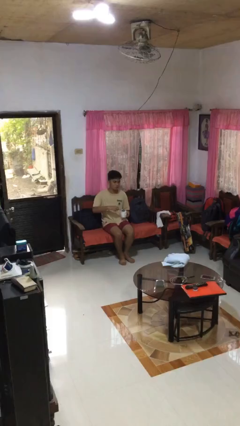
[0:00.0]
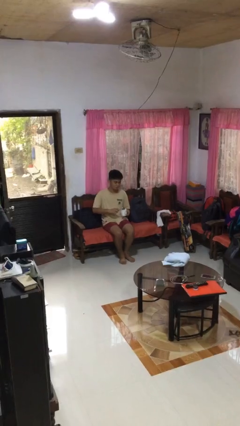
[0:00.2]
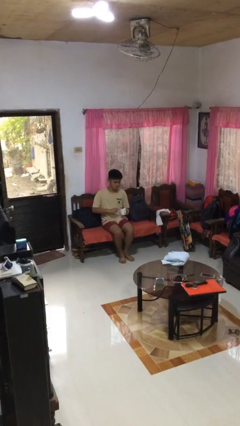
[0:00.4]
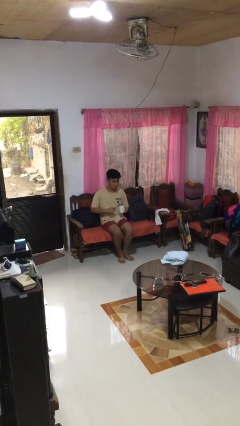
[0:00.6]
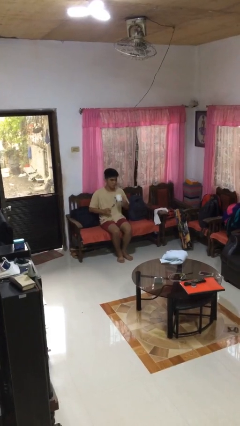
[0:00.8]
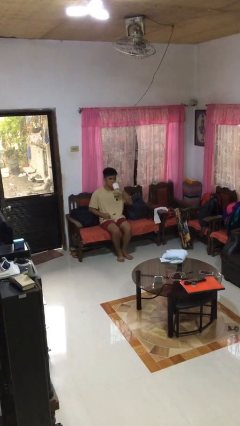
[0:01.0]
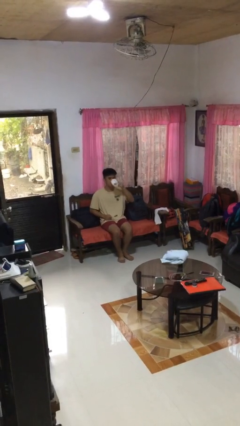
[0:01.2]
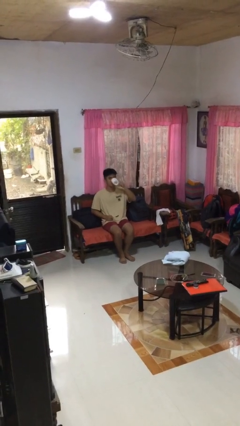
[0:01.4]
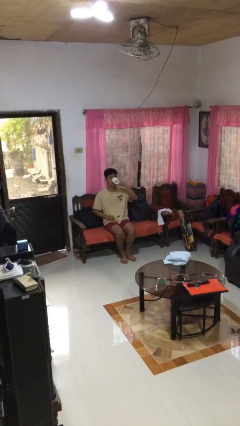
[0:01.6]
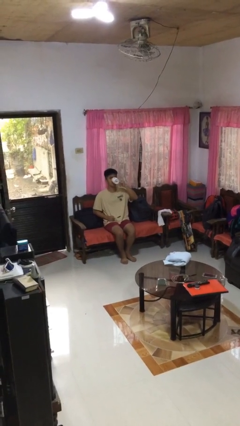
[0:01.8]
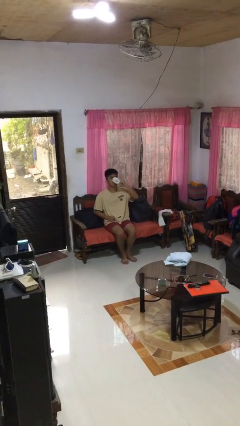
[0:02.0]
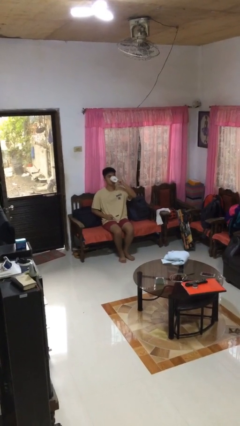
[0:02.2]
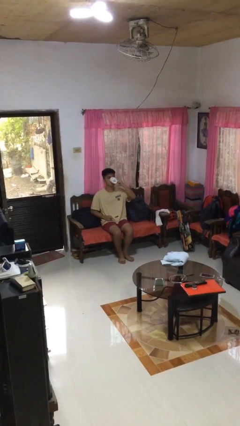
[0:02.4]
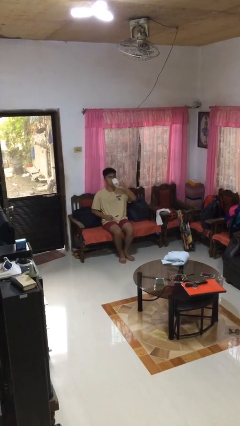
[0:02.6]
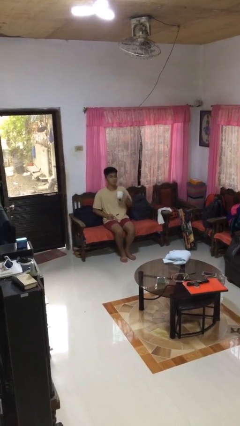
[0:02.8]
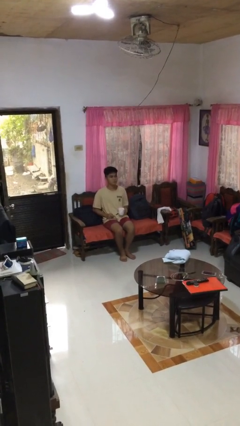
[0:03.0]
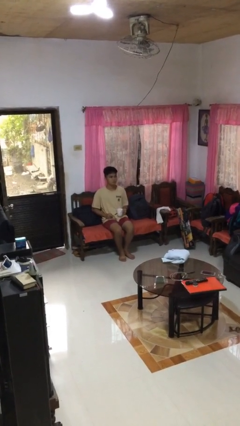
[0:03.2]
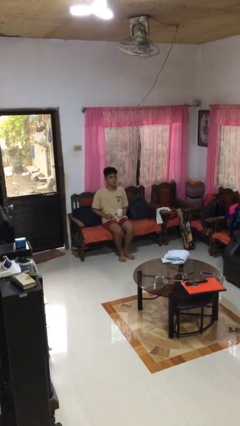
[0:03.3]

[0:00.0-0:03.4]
person drinks from mug

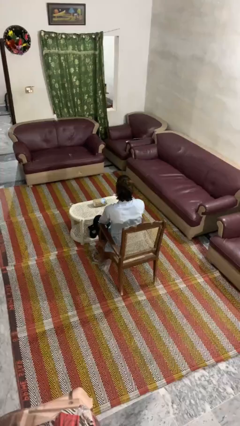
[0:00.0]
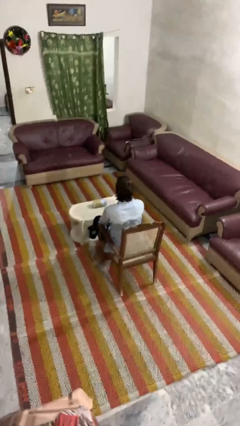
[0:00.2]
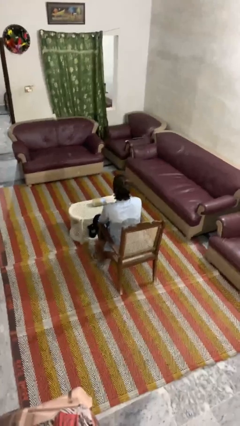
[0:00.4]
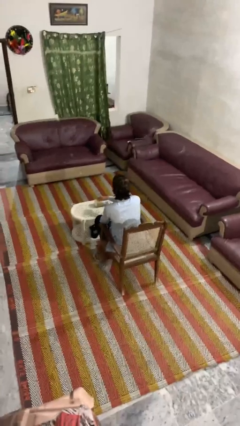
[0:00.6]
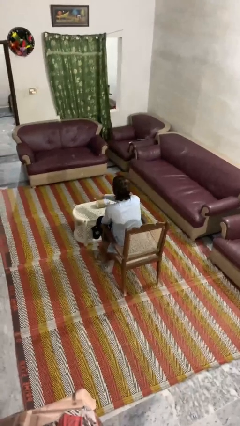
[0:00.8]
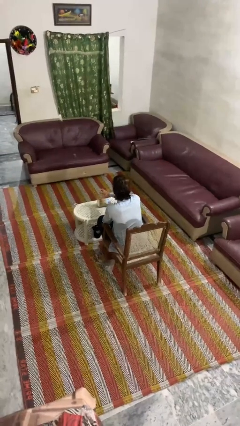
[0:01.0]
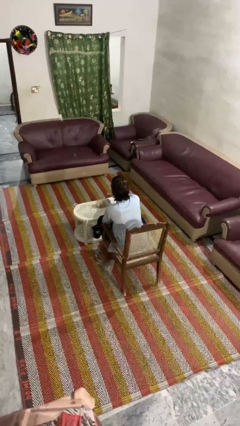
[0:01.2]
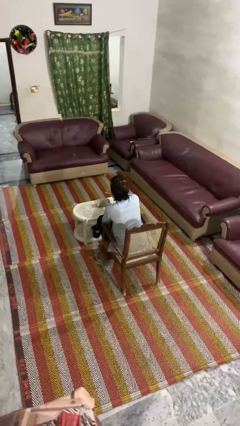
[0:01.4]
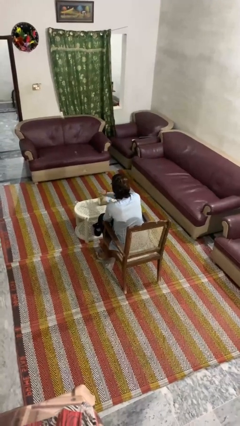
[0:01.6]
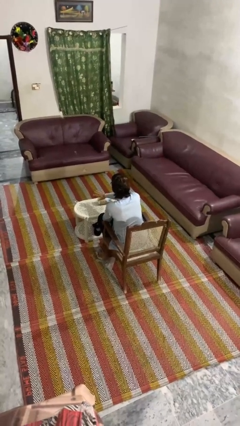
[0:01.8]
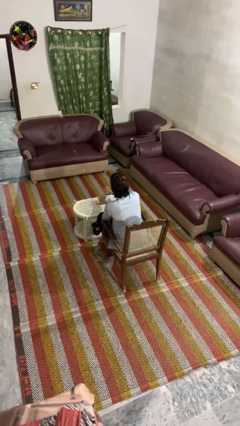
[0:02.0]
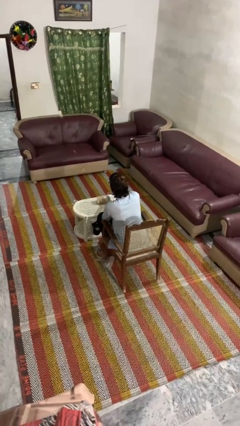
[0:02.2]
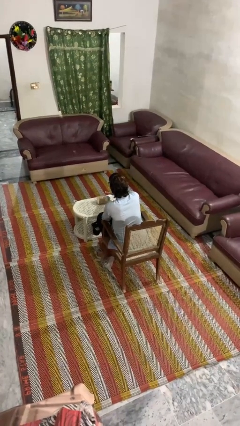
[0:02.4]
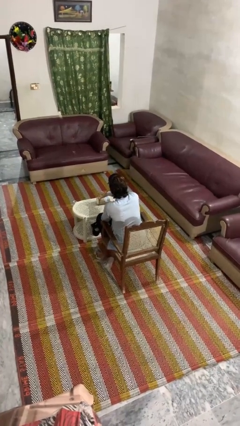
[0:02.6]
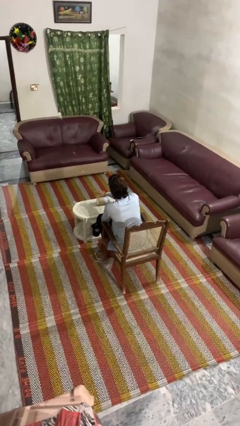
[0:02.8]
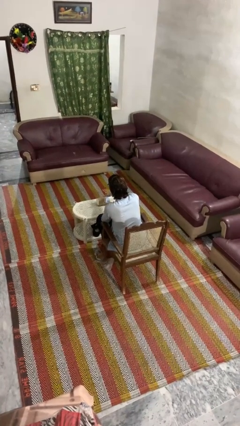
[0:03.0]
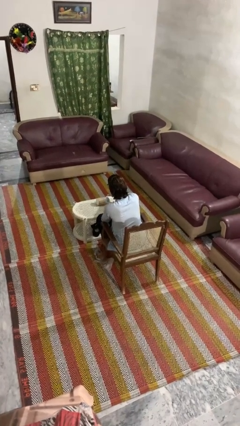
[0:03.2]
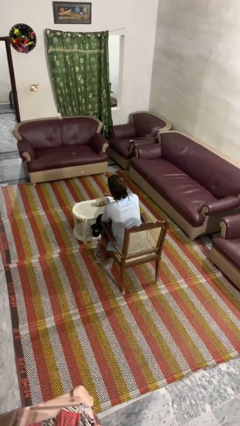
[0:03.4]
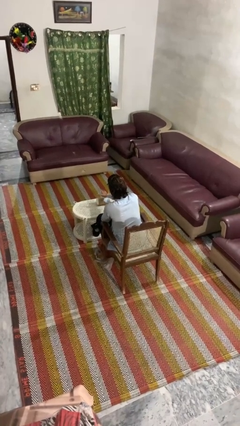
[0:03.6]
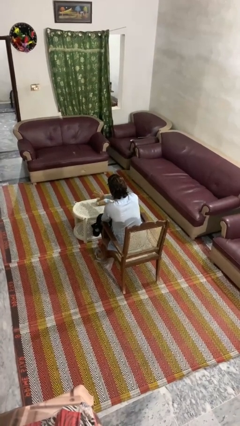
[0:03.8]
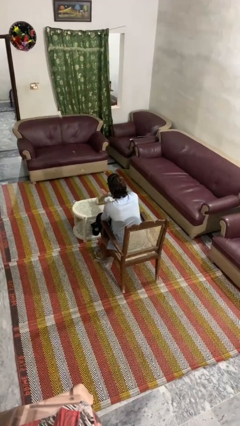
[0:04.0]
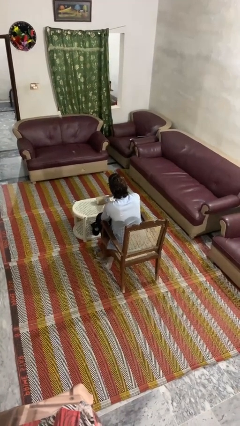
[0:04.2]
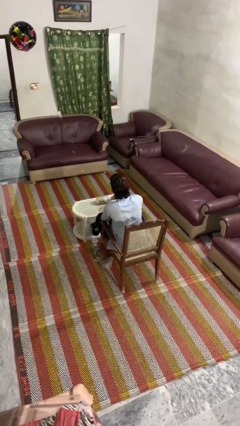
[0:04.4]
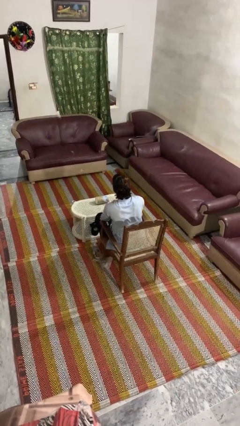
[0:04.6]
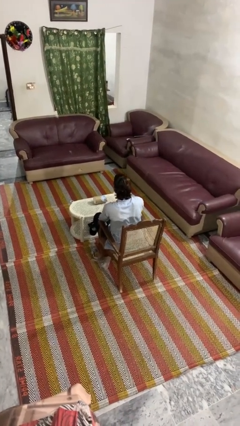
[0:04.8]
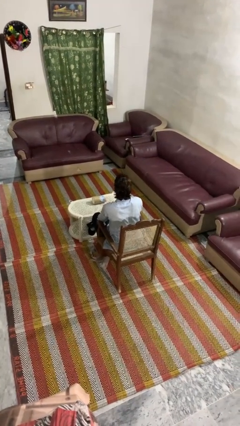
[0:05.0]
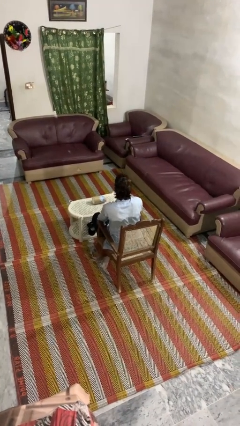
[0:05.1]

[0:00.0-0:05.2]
person waves hand over object

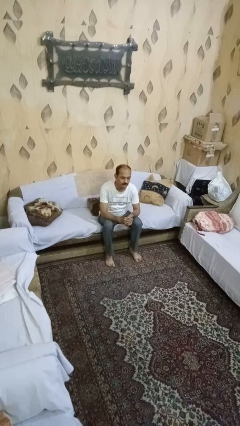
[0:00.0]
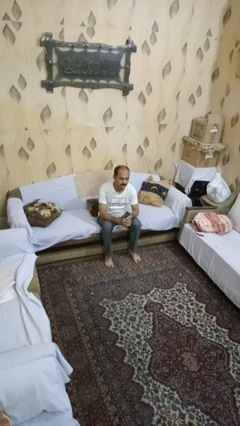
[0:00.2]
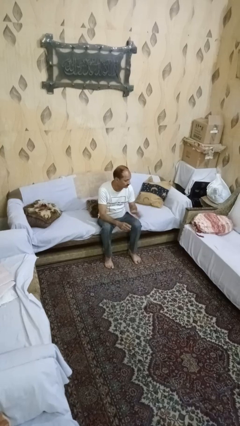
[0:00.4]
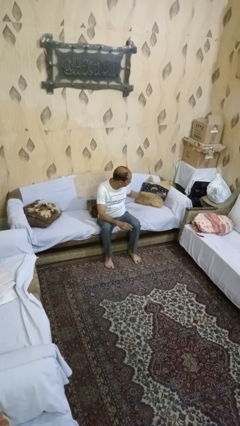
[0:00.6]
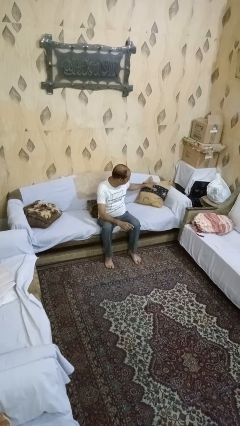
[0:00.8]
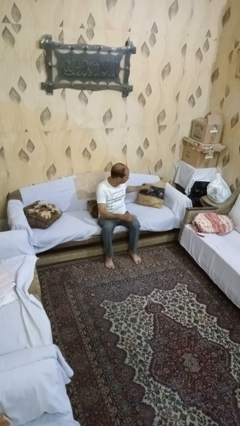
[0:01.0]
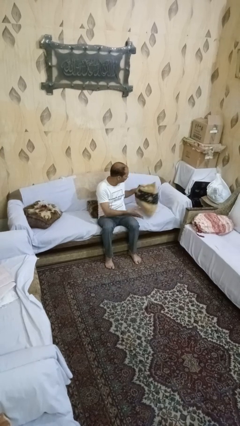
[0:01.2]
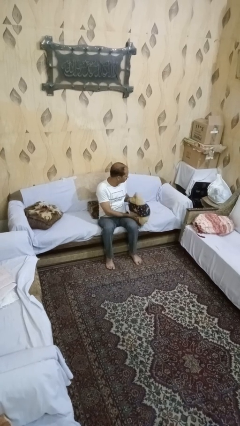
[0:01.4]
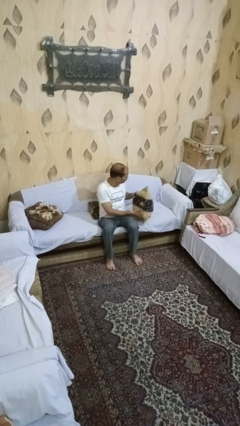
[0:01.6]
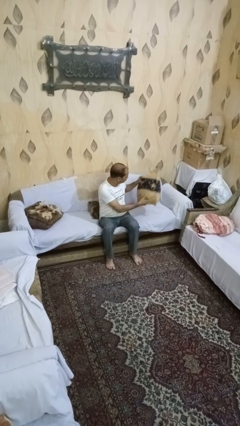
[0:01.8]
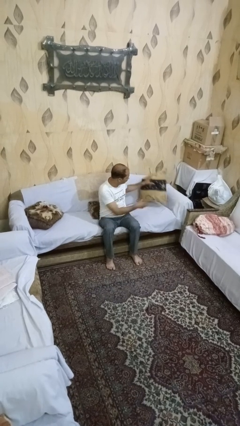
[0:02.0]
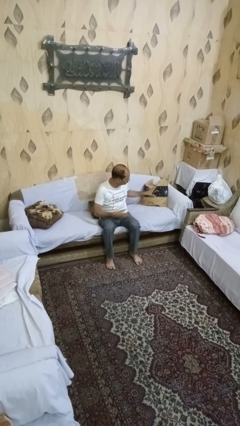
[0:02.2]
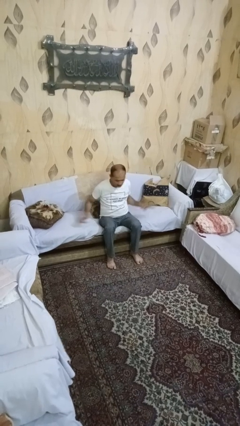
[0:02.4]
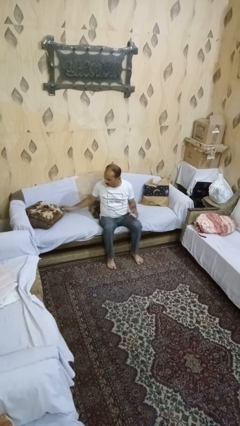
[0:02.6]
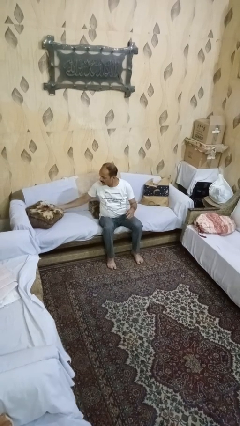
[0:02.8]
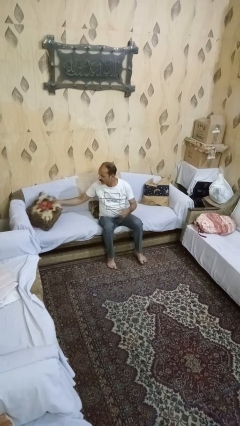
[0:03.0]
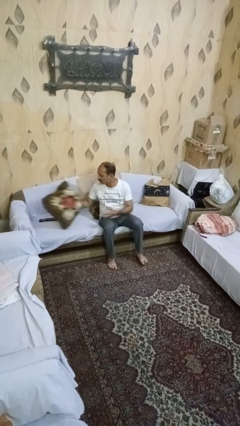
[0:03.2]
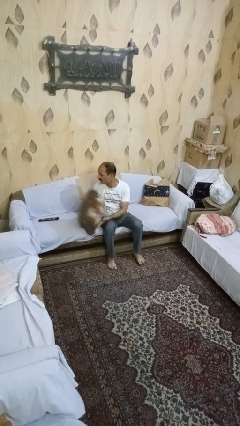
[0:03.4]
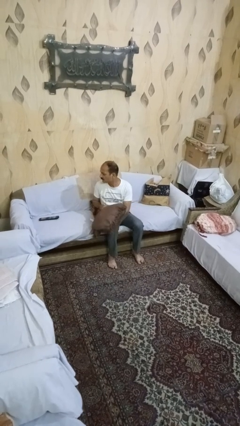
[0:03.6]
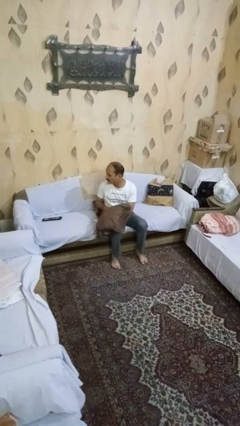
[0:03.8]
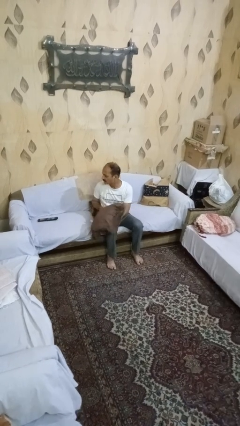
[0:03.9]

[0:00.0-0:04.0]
person searches in couch

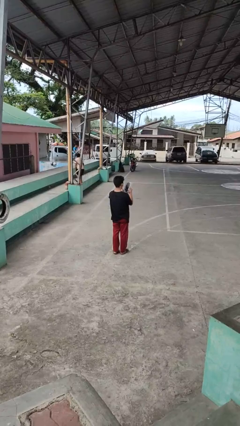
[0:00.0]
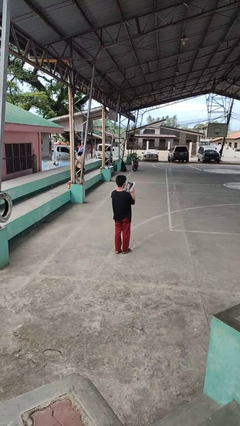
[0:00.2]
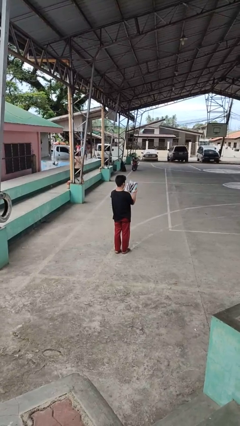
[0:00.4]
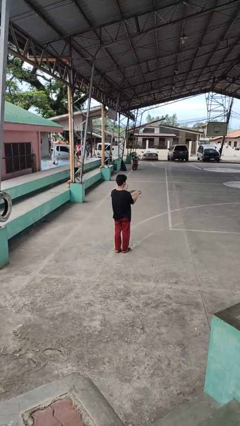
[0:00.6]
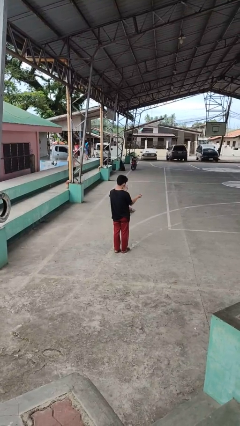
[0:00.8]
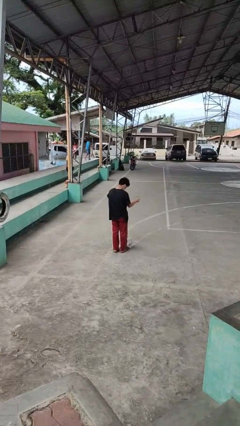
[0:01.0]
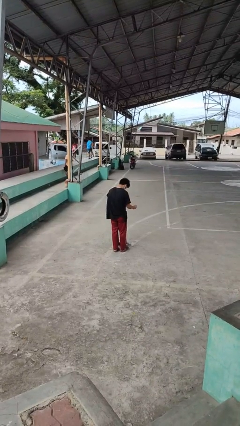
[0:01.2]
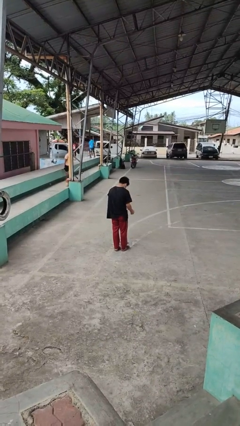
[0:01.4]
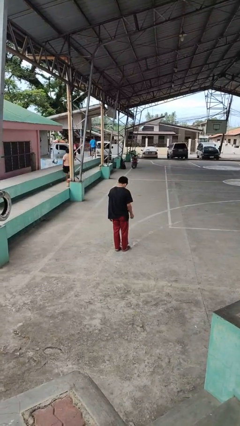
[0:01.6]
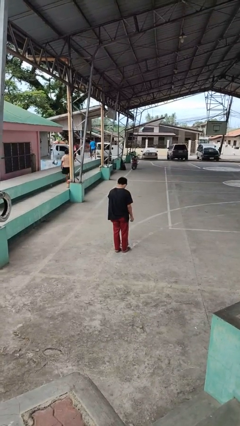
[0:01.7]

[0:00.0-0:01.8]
person drops object

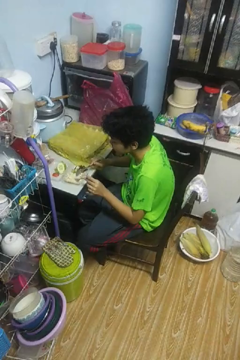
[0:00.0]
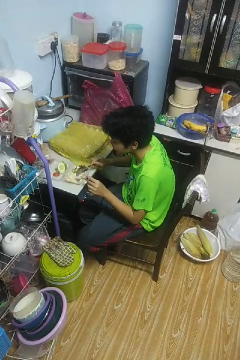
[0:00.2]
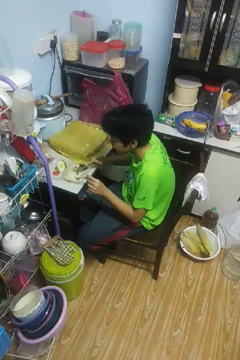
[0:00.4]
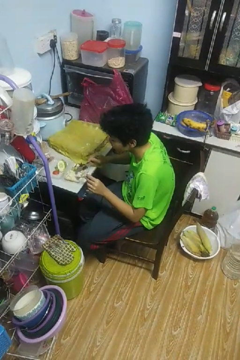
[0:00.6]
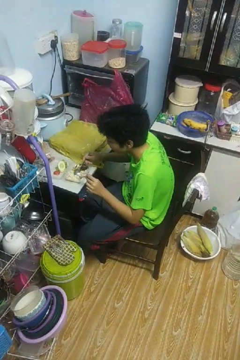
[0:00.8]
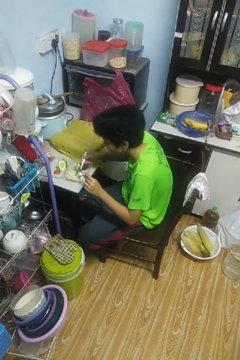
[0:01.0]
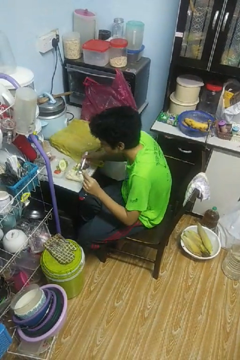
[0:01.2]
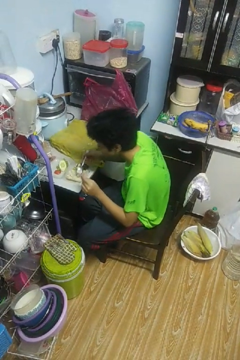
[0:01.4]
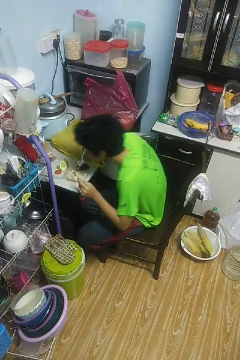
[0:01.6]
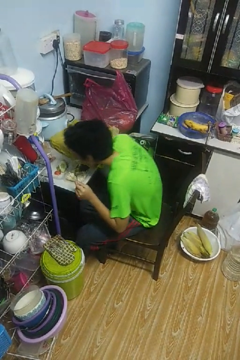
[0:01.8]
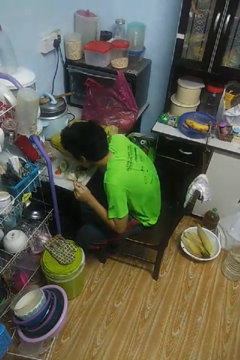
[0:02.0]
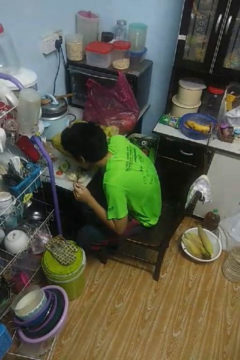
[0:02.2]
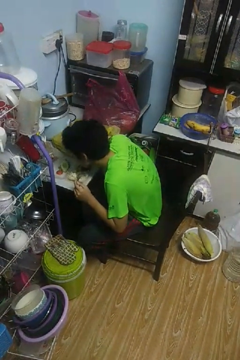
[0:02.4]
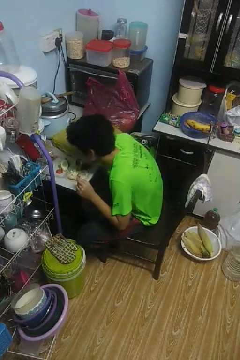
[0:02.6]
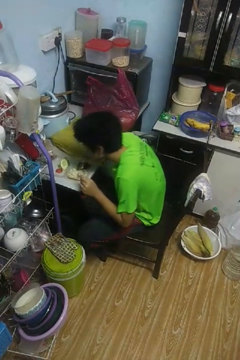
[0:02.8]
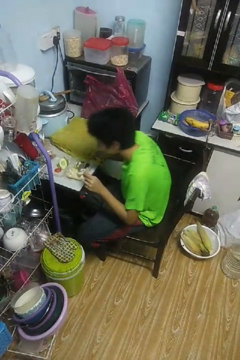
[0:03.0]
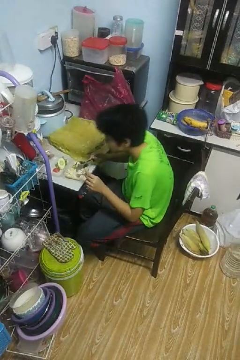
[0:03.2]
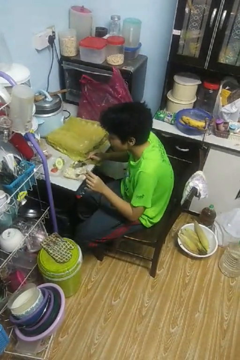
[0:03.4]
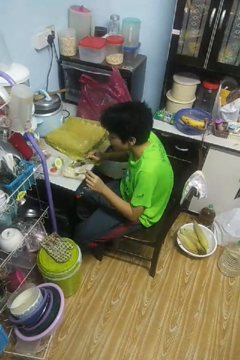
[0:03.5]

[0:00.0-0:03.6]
person eats with utensil

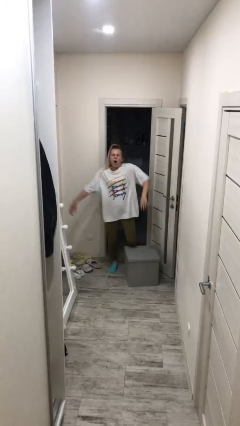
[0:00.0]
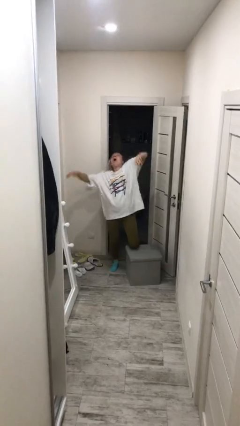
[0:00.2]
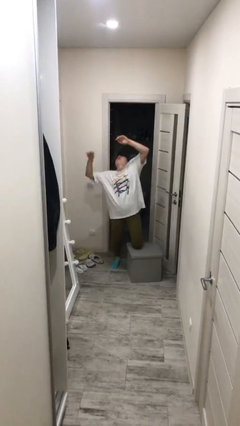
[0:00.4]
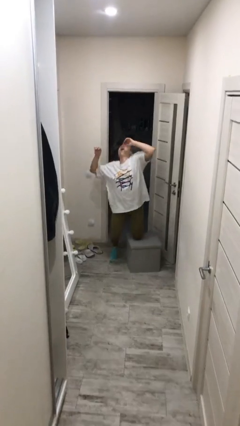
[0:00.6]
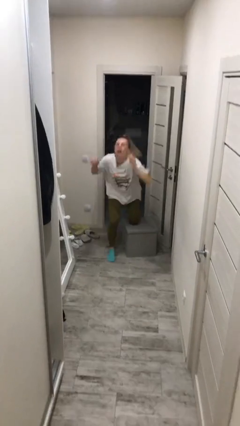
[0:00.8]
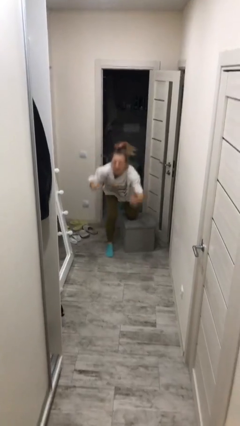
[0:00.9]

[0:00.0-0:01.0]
person trips on object on floor
